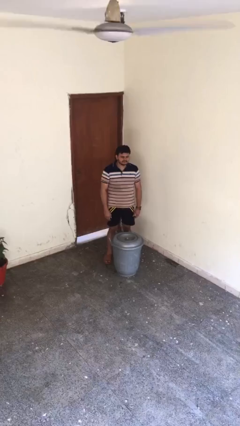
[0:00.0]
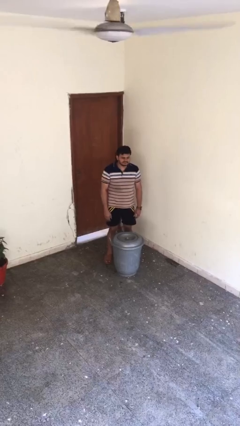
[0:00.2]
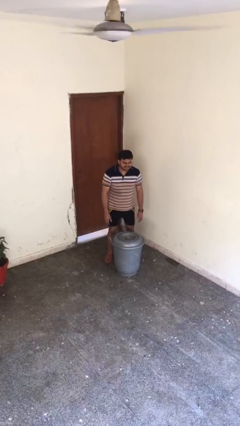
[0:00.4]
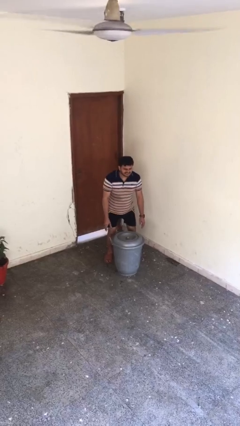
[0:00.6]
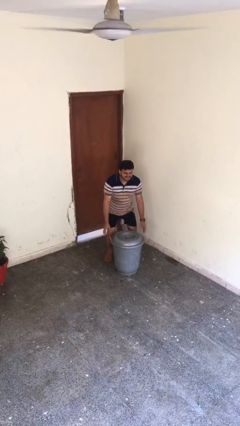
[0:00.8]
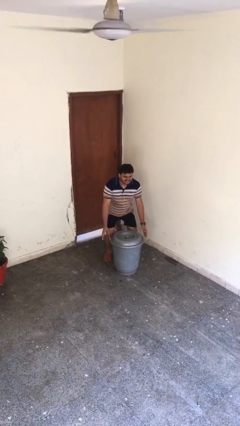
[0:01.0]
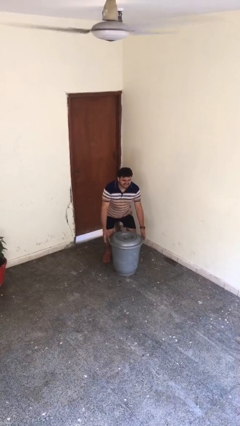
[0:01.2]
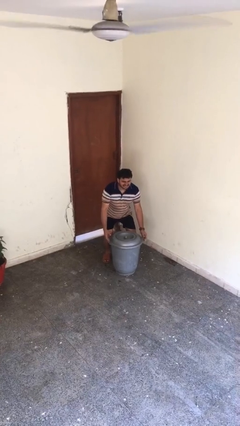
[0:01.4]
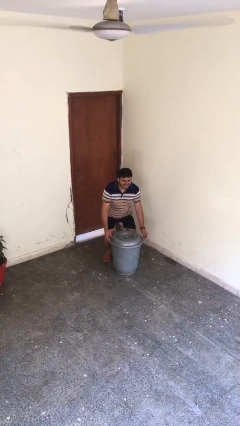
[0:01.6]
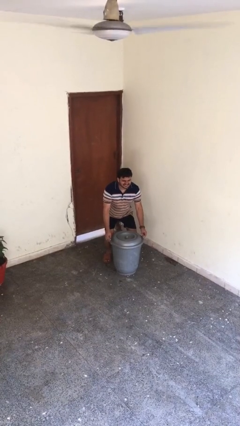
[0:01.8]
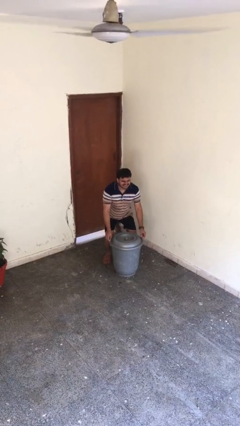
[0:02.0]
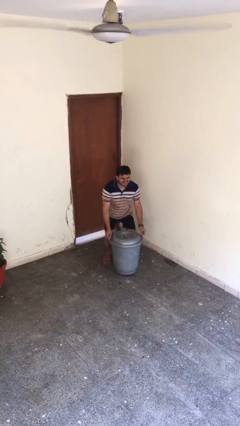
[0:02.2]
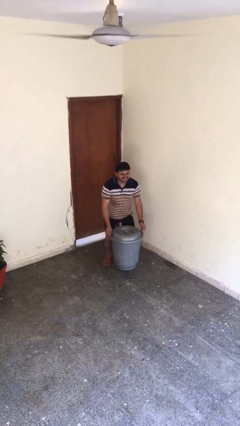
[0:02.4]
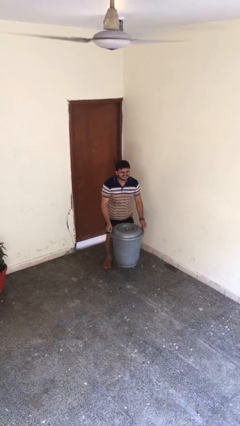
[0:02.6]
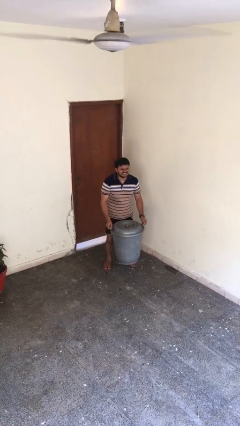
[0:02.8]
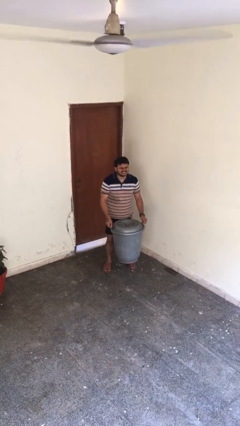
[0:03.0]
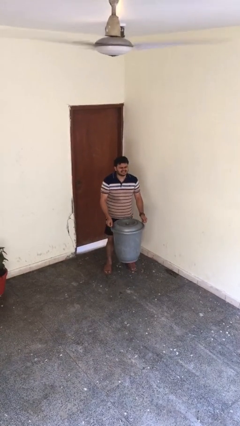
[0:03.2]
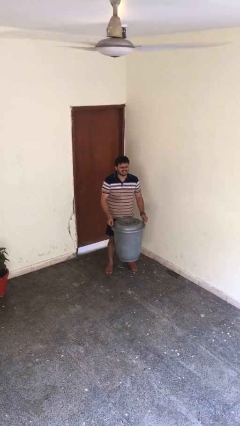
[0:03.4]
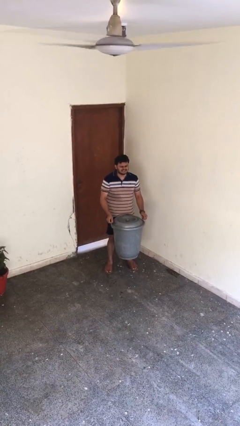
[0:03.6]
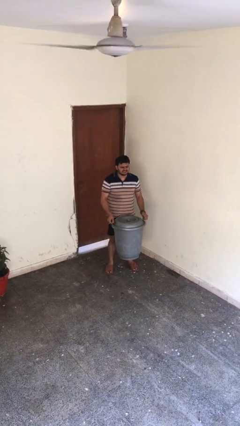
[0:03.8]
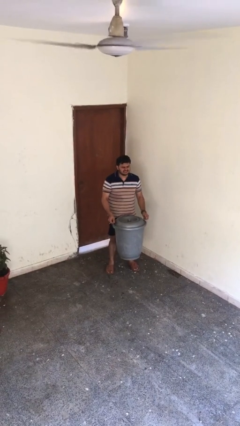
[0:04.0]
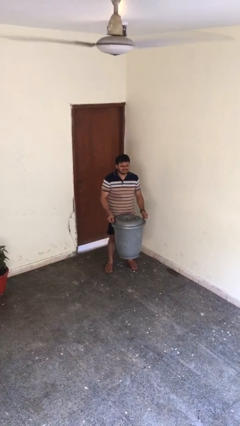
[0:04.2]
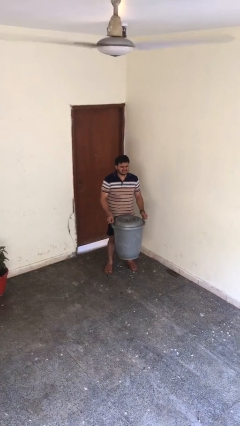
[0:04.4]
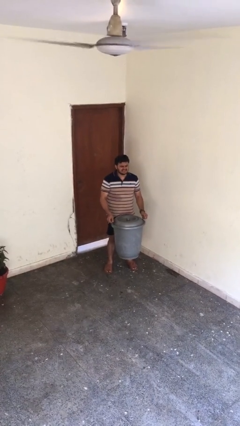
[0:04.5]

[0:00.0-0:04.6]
person picks up object from floor

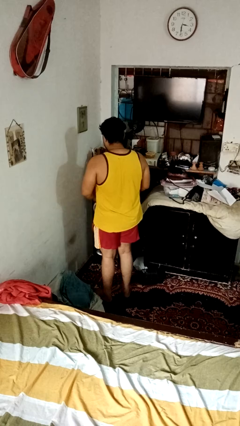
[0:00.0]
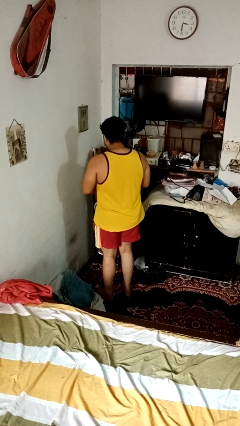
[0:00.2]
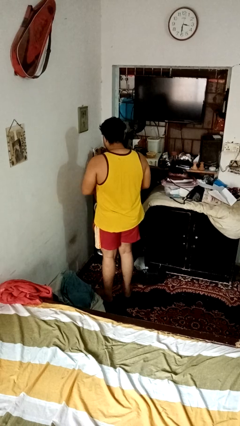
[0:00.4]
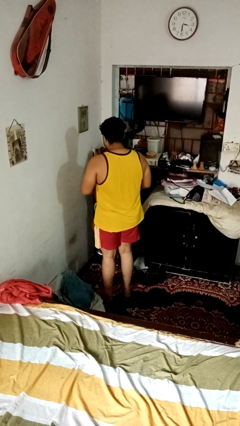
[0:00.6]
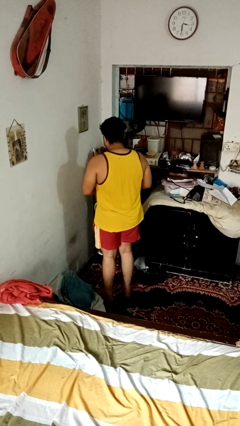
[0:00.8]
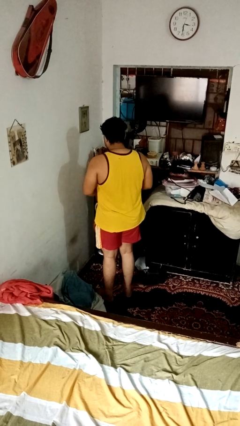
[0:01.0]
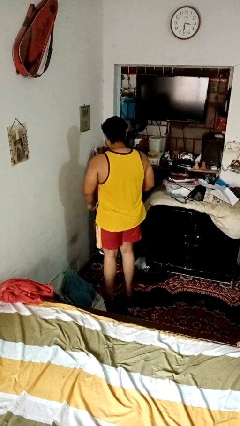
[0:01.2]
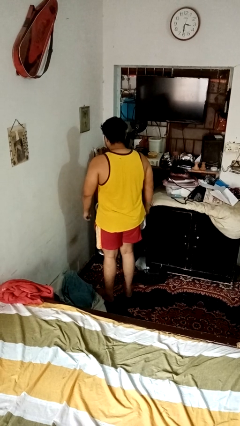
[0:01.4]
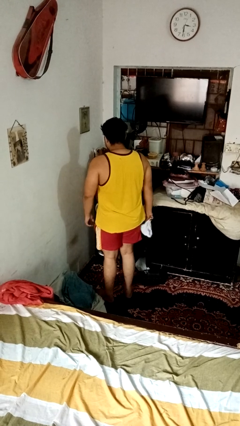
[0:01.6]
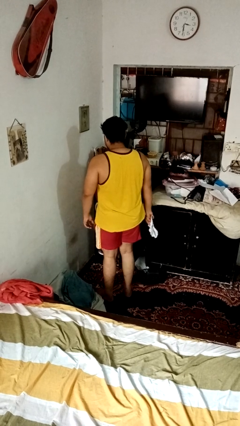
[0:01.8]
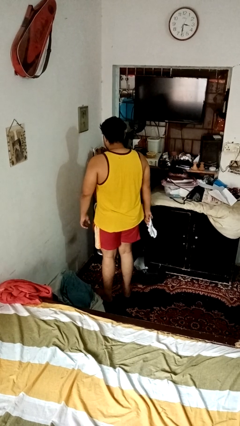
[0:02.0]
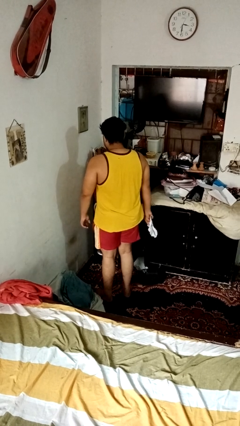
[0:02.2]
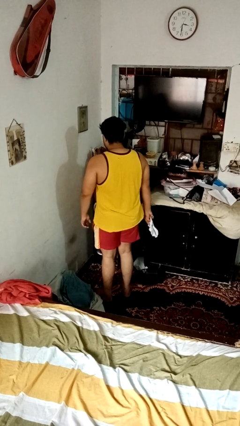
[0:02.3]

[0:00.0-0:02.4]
person crumples paper

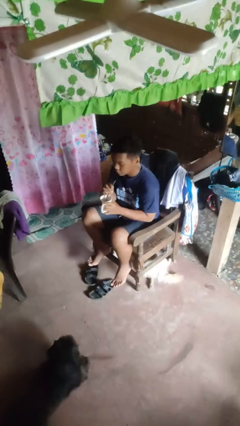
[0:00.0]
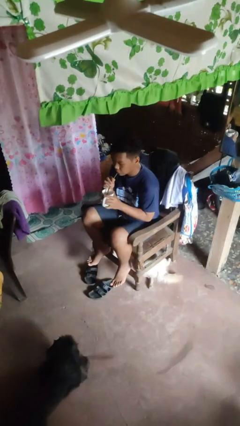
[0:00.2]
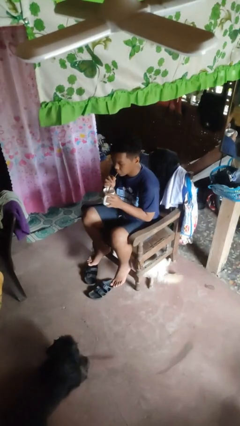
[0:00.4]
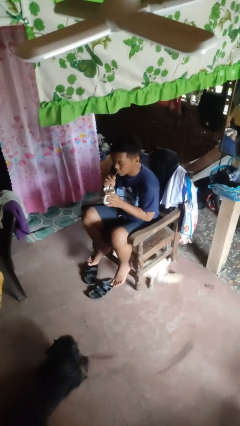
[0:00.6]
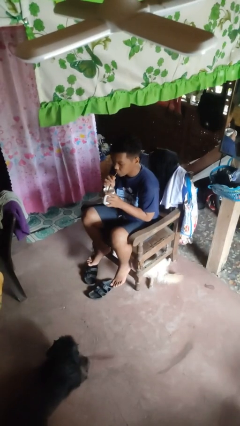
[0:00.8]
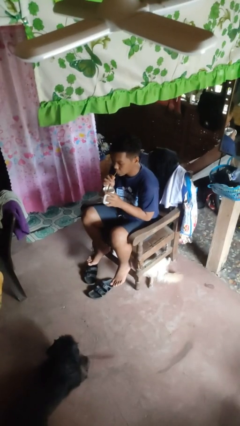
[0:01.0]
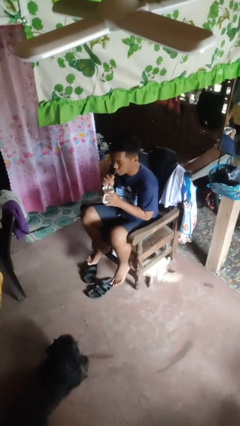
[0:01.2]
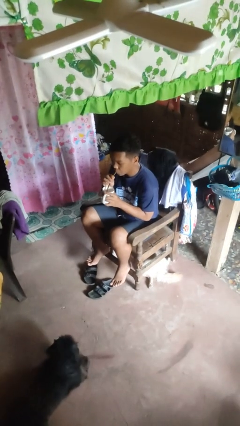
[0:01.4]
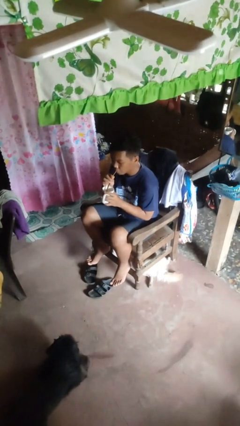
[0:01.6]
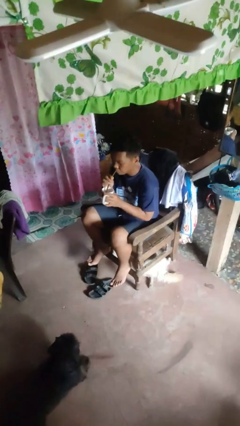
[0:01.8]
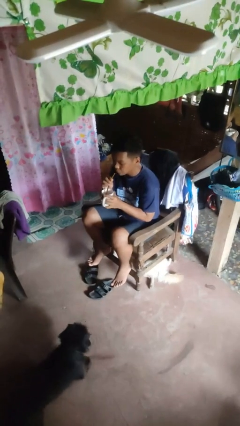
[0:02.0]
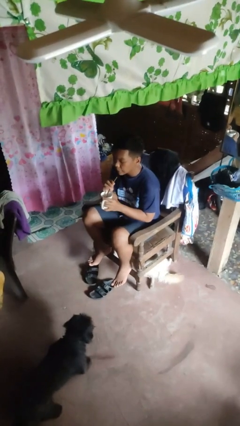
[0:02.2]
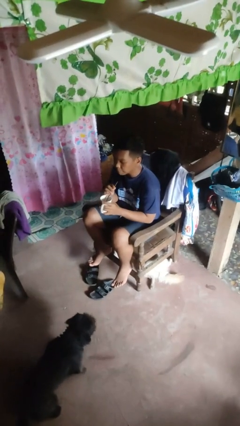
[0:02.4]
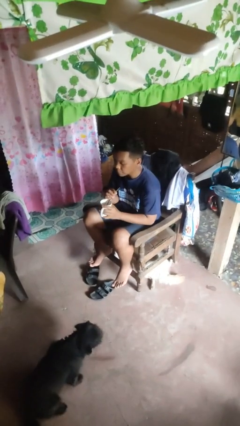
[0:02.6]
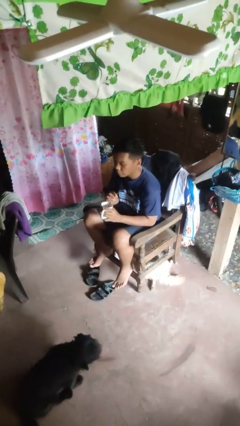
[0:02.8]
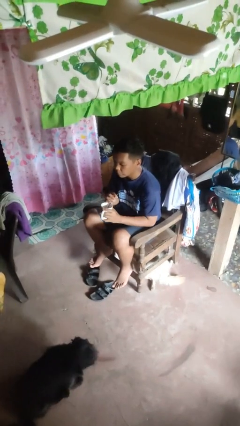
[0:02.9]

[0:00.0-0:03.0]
person drinks from straw

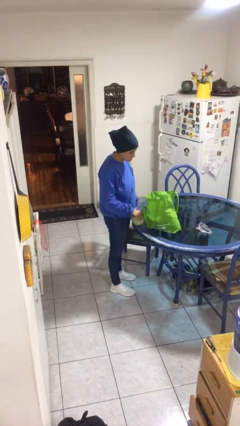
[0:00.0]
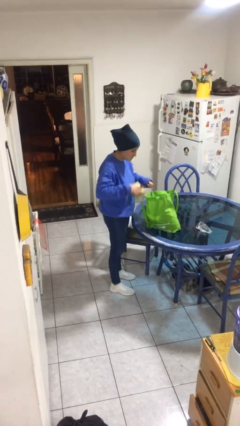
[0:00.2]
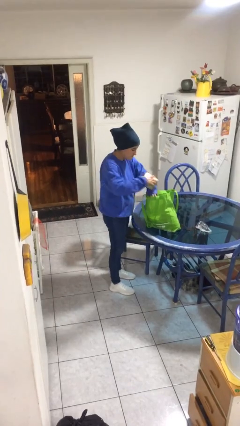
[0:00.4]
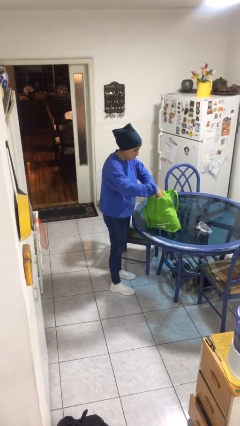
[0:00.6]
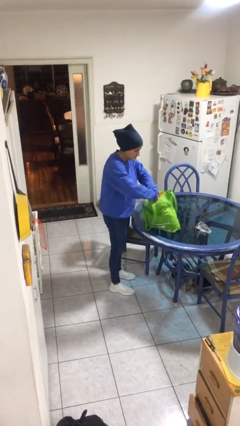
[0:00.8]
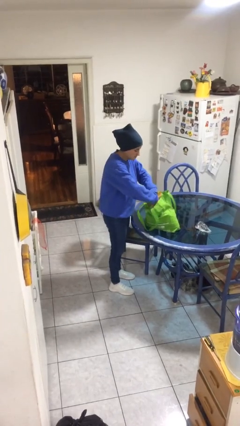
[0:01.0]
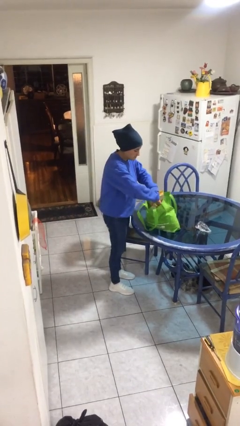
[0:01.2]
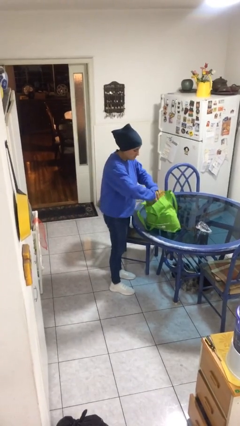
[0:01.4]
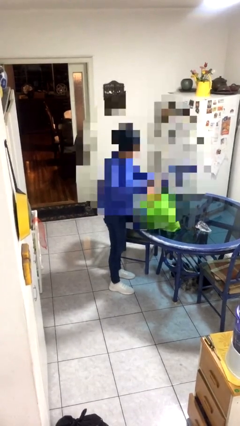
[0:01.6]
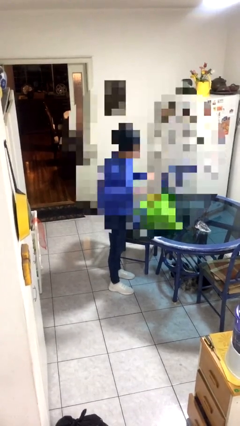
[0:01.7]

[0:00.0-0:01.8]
person puts object into bag

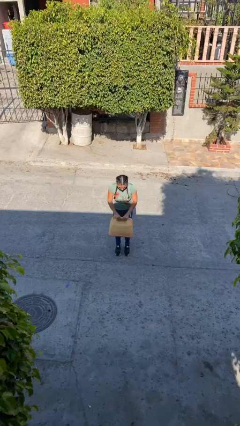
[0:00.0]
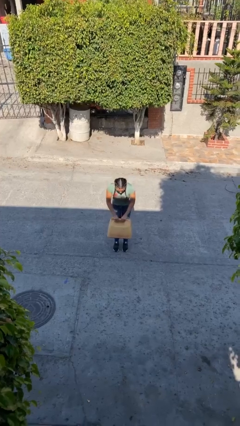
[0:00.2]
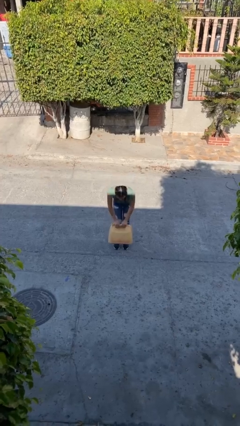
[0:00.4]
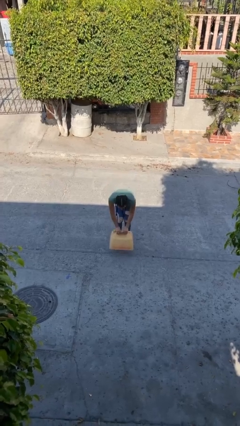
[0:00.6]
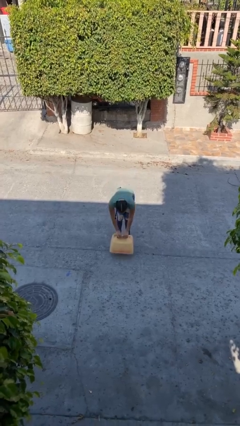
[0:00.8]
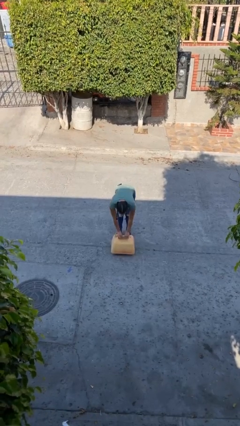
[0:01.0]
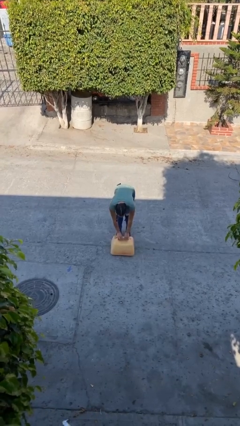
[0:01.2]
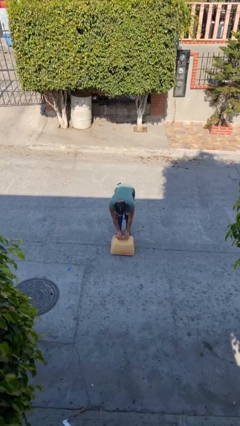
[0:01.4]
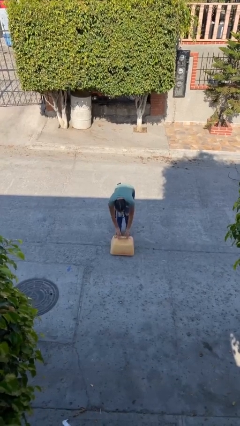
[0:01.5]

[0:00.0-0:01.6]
person puts down object on floor

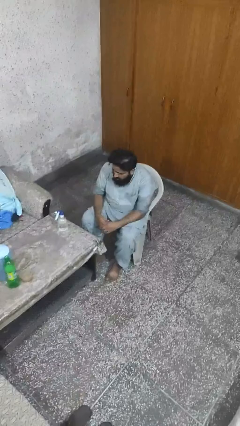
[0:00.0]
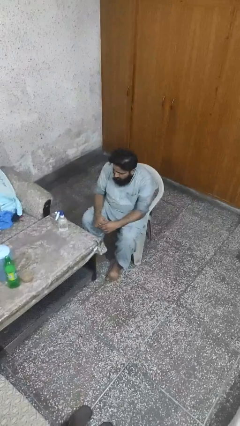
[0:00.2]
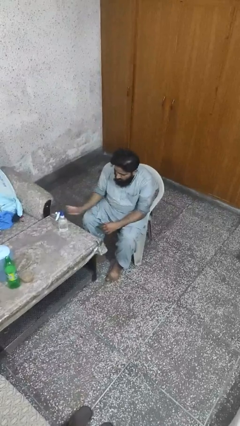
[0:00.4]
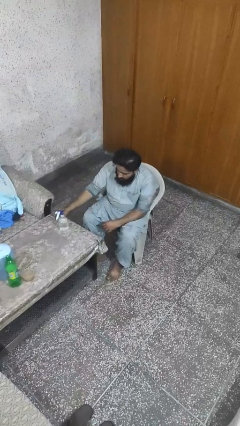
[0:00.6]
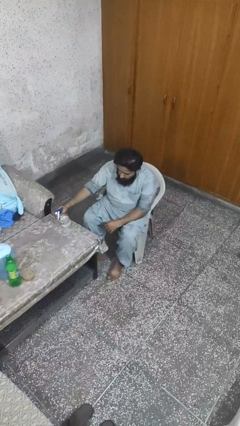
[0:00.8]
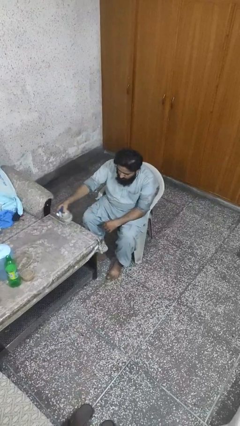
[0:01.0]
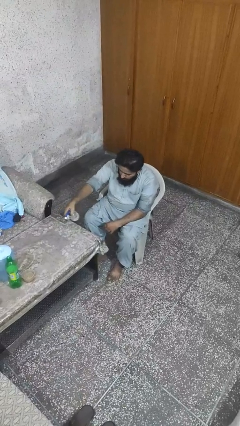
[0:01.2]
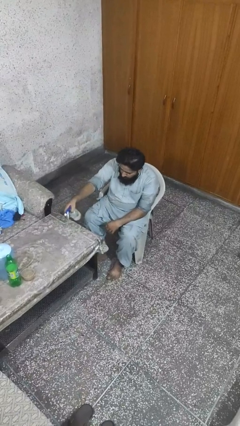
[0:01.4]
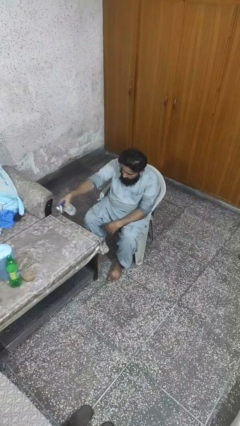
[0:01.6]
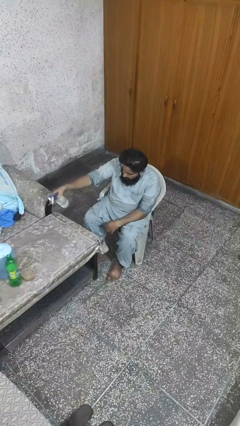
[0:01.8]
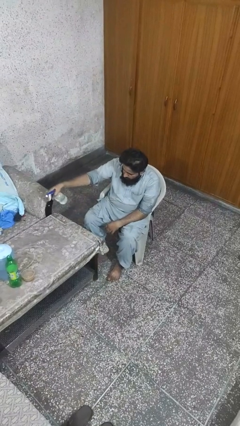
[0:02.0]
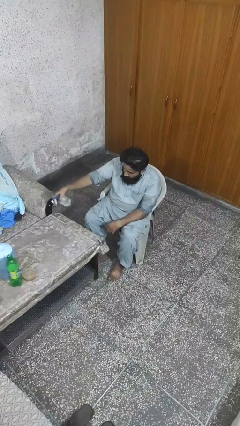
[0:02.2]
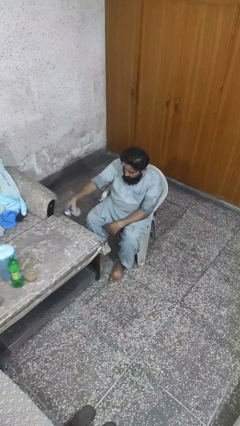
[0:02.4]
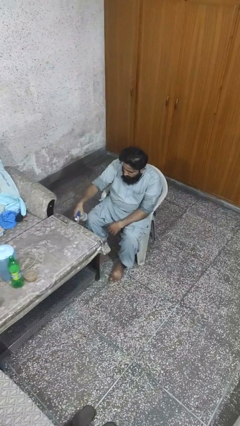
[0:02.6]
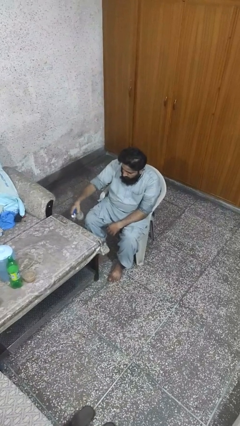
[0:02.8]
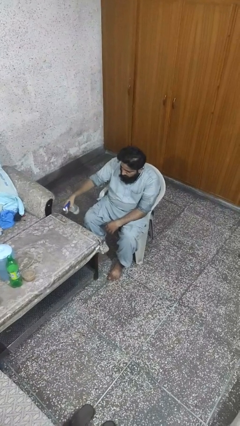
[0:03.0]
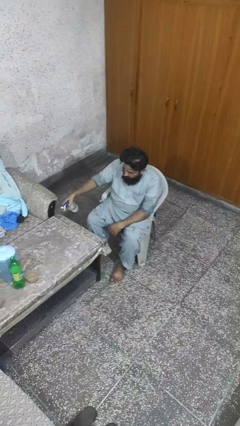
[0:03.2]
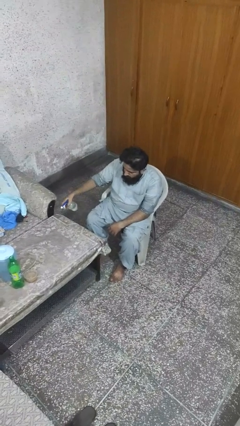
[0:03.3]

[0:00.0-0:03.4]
person sprays from bottle

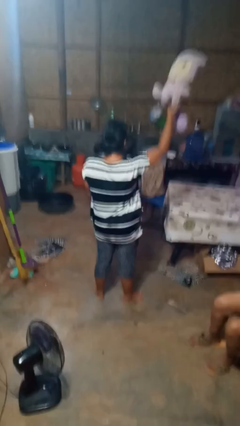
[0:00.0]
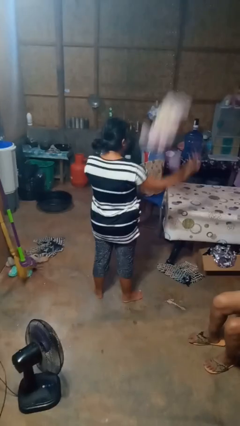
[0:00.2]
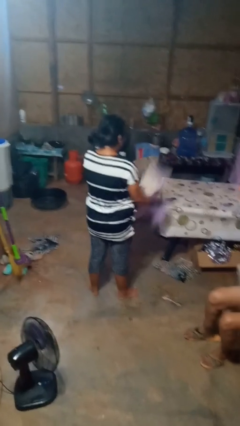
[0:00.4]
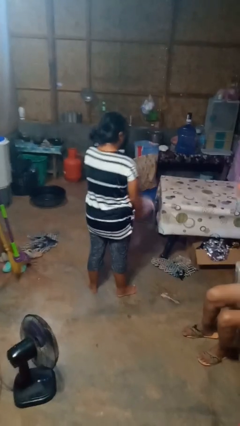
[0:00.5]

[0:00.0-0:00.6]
person drops object
